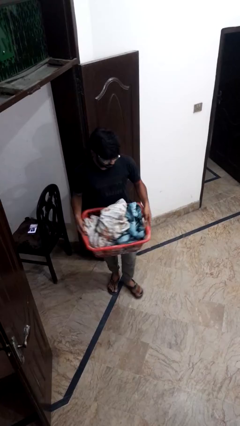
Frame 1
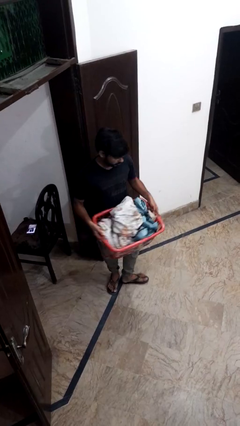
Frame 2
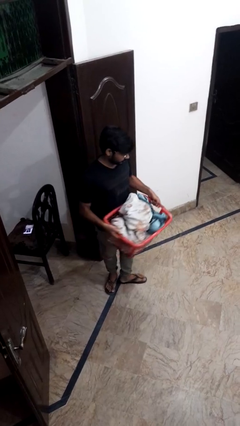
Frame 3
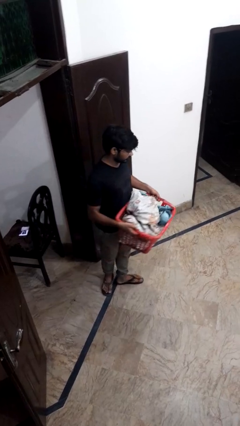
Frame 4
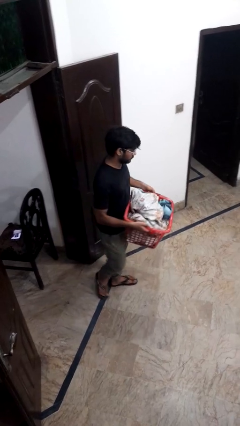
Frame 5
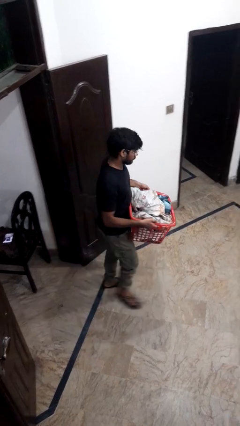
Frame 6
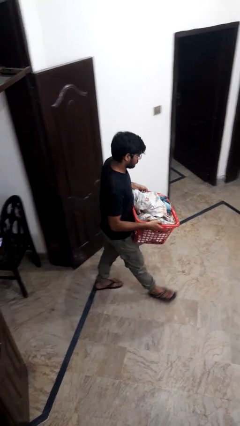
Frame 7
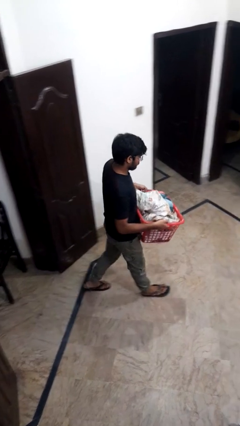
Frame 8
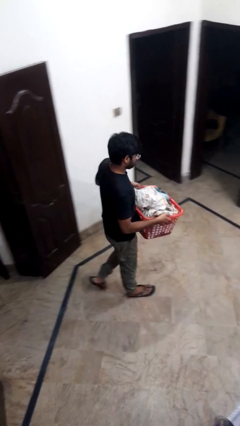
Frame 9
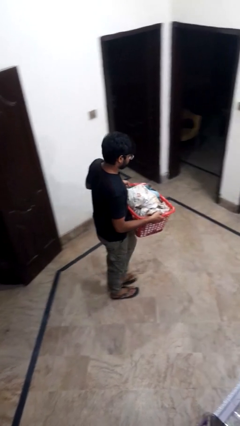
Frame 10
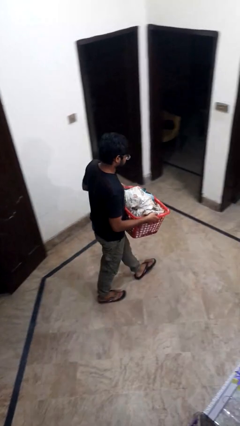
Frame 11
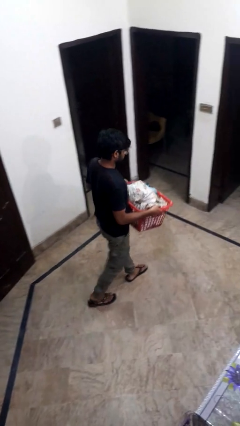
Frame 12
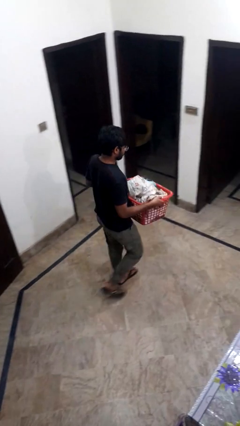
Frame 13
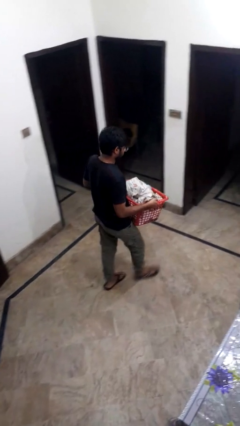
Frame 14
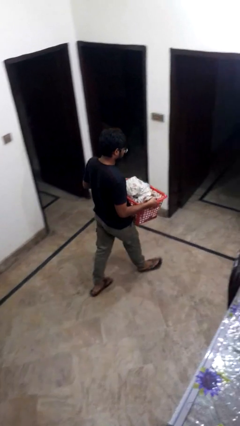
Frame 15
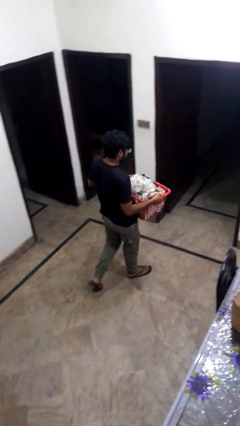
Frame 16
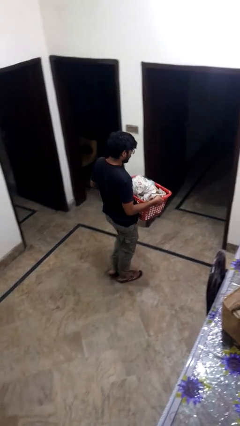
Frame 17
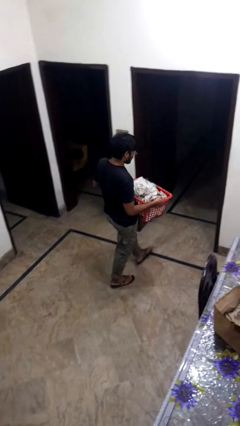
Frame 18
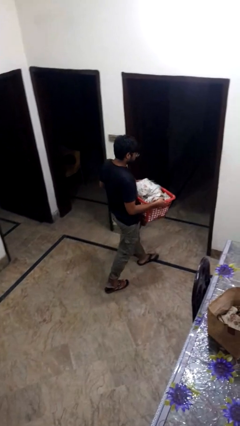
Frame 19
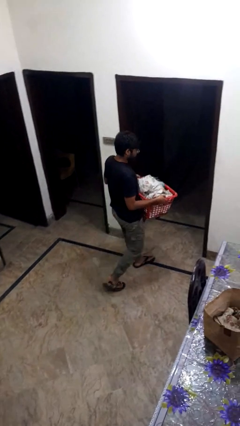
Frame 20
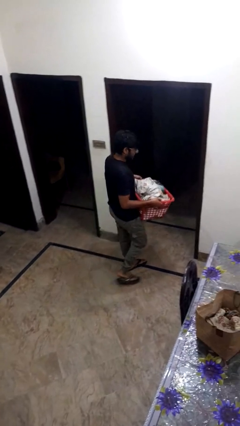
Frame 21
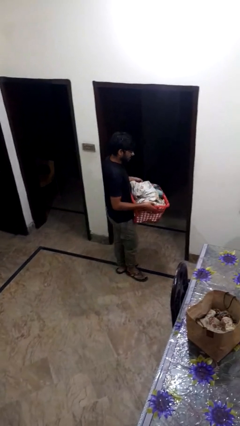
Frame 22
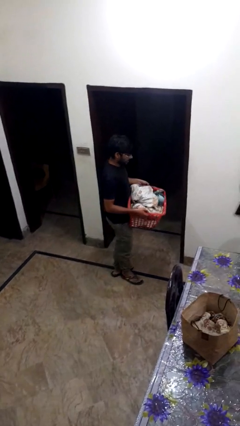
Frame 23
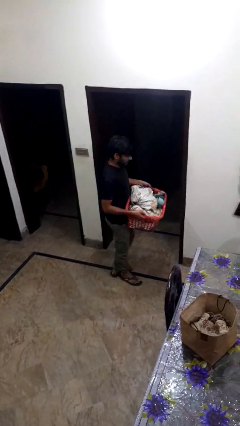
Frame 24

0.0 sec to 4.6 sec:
person carries laundry basket

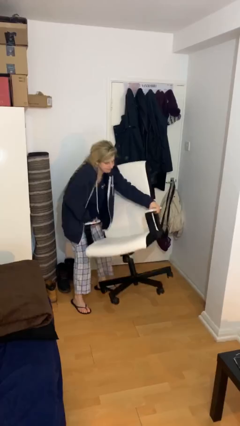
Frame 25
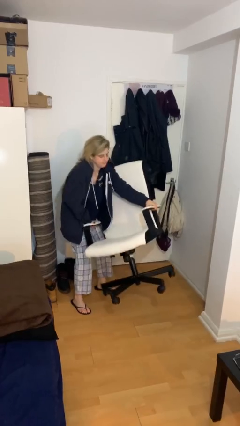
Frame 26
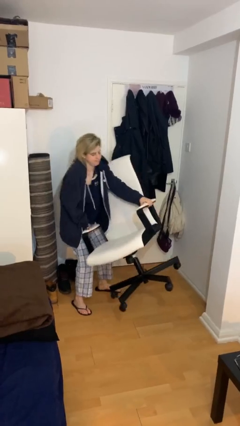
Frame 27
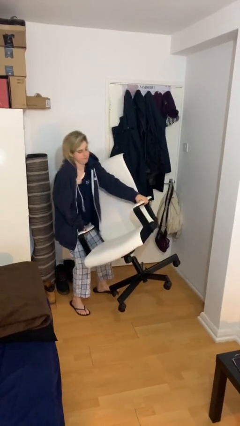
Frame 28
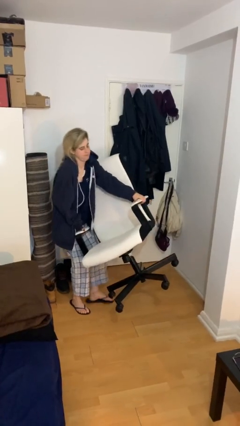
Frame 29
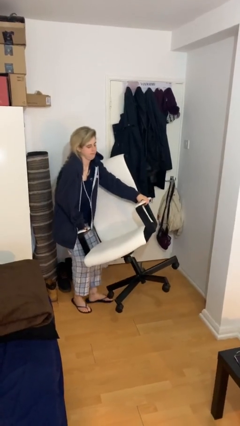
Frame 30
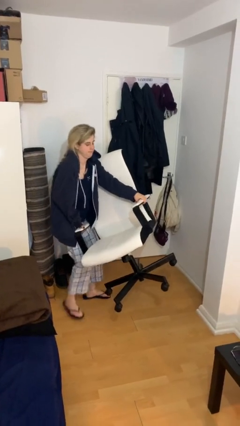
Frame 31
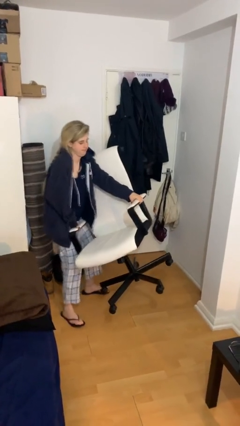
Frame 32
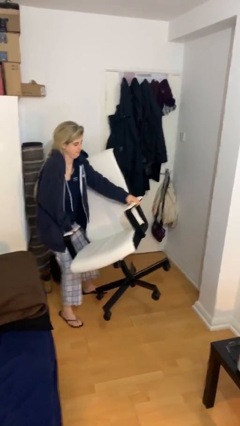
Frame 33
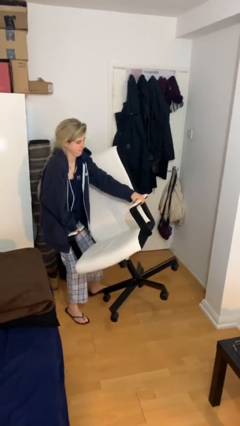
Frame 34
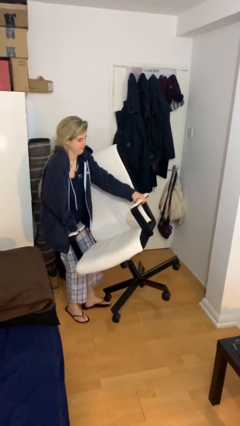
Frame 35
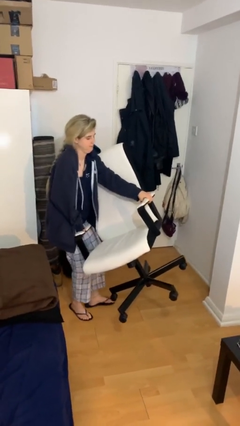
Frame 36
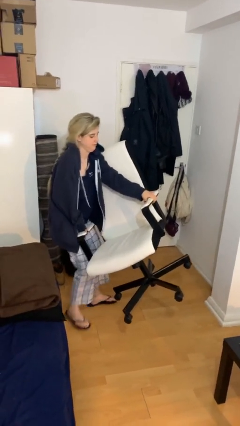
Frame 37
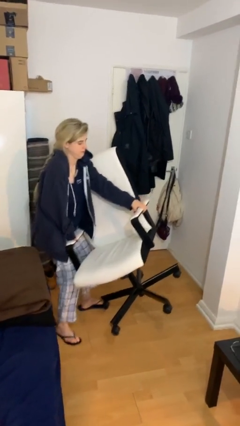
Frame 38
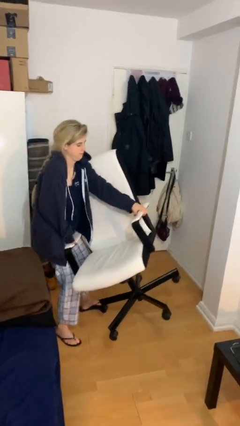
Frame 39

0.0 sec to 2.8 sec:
person carries heavy object

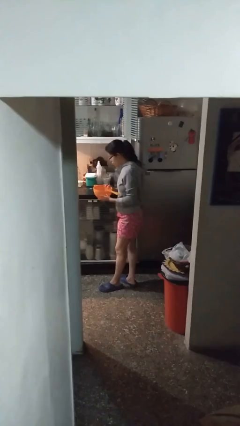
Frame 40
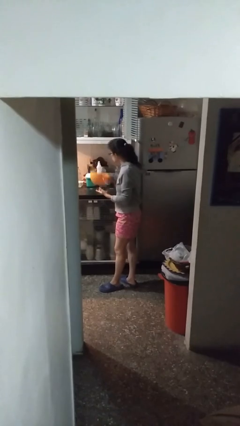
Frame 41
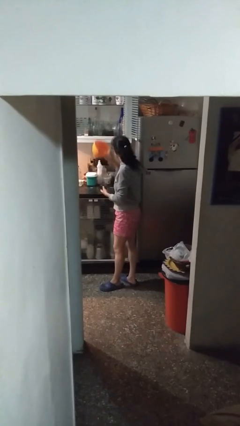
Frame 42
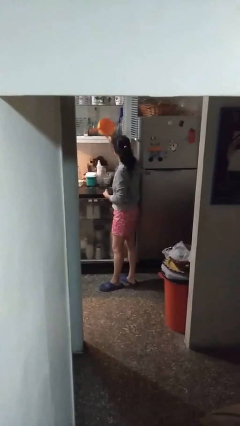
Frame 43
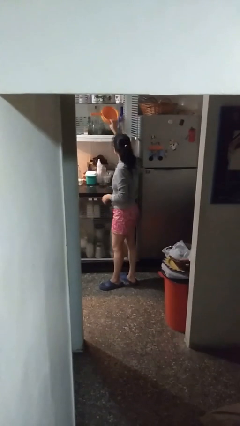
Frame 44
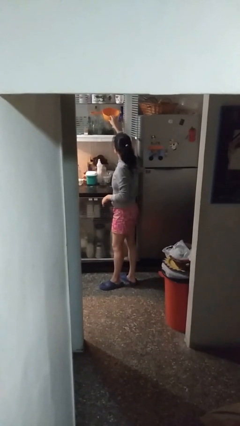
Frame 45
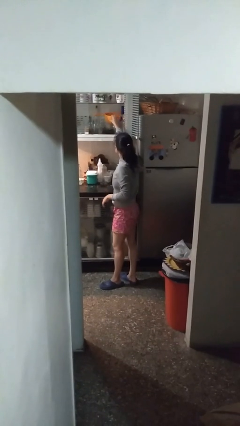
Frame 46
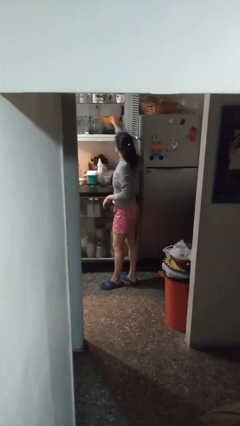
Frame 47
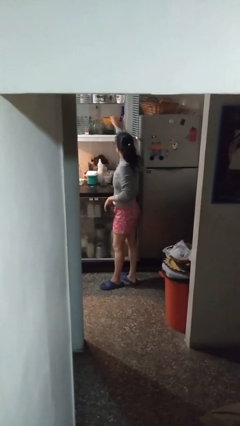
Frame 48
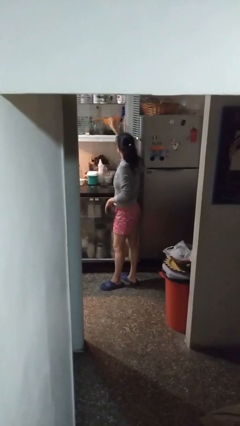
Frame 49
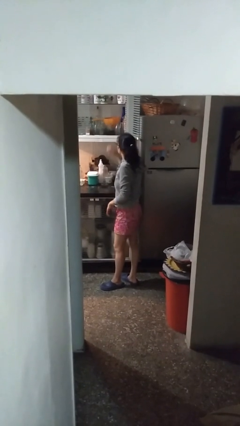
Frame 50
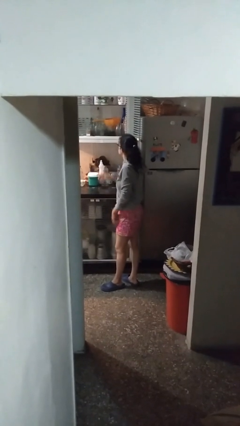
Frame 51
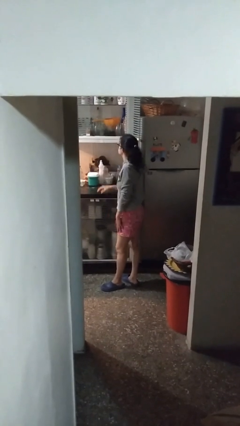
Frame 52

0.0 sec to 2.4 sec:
person puts down object into cabinet

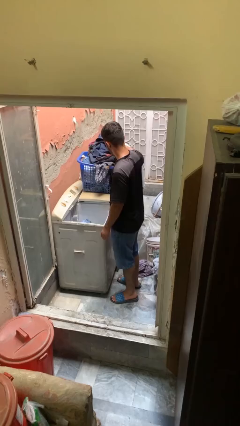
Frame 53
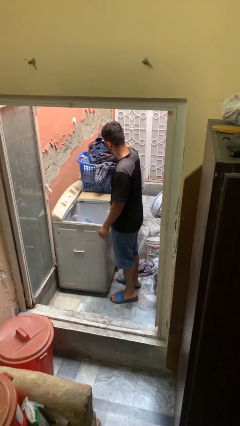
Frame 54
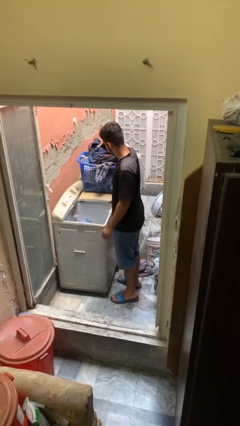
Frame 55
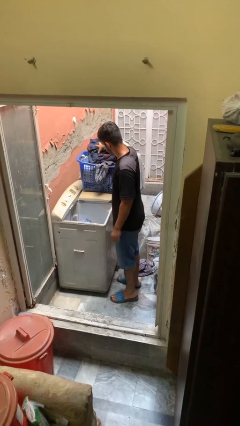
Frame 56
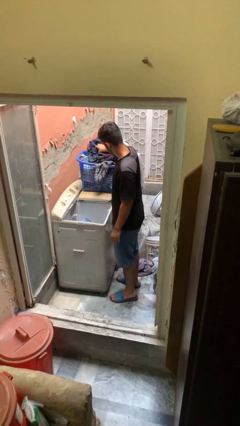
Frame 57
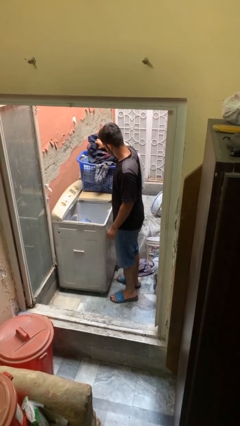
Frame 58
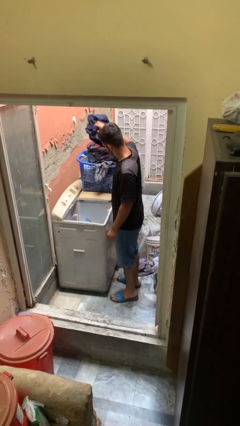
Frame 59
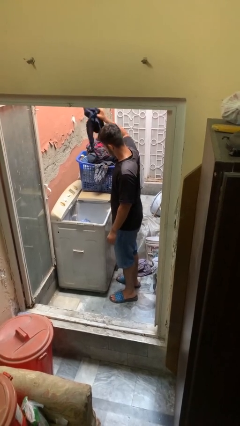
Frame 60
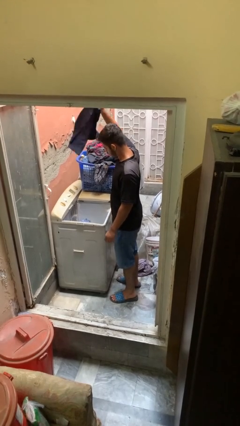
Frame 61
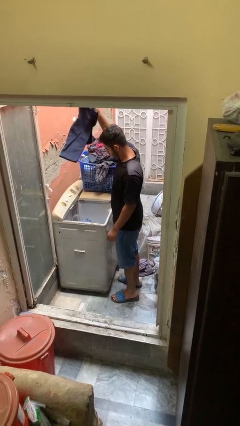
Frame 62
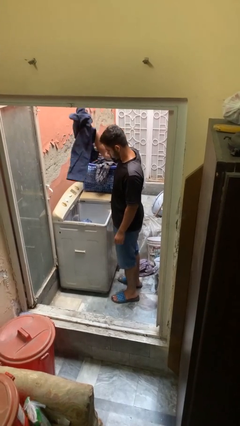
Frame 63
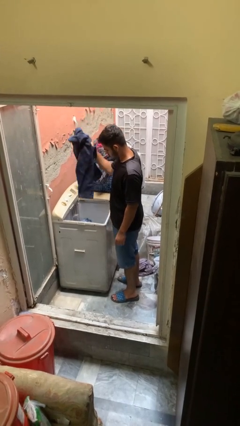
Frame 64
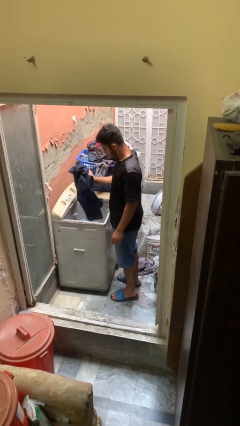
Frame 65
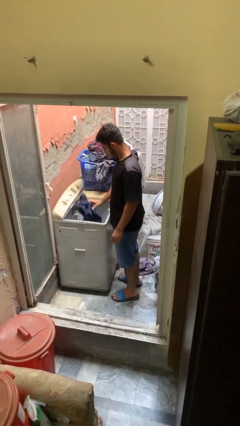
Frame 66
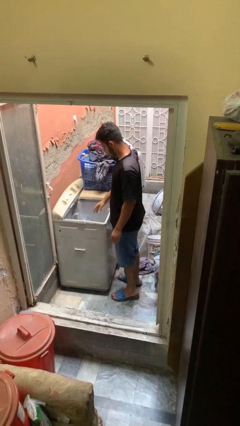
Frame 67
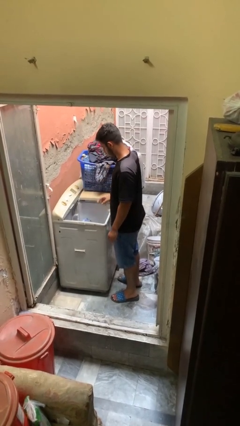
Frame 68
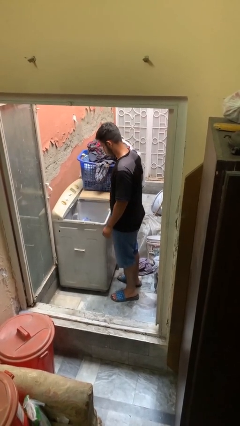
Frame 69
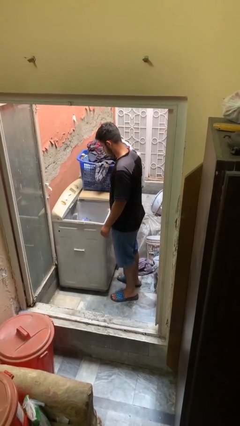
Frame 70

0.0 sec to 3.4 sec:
person loads clotheswasher

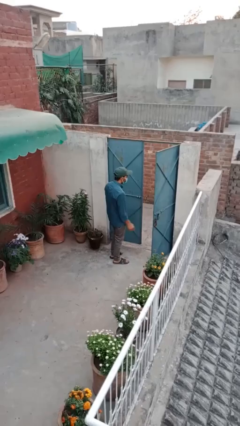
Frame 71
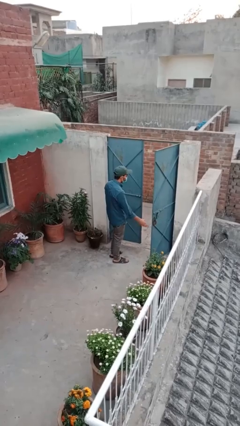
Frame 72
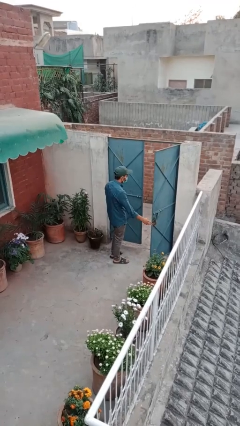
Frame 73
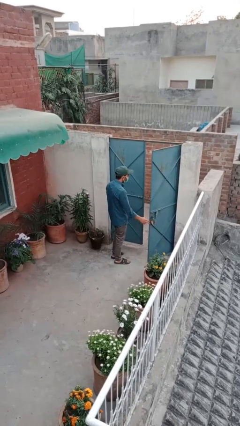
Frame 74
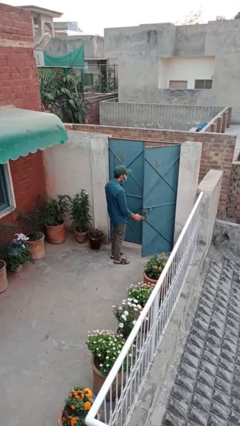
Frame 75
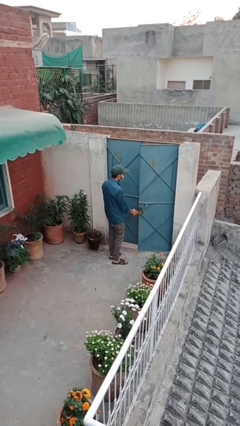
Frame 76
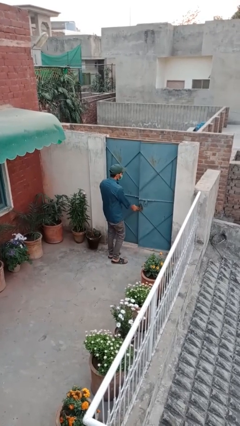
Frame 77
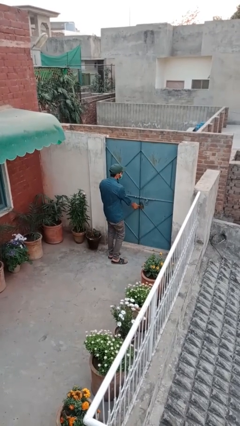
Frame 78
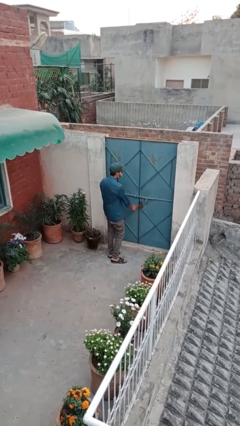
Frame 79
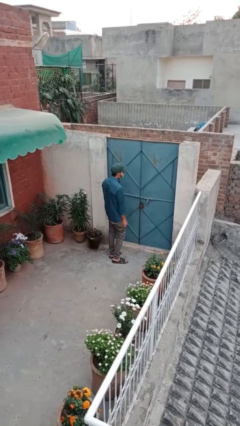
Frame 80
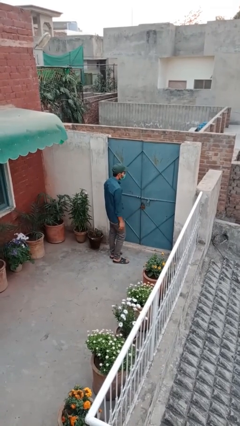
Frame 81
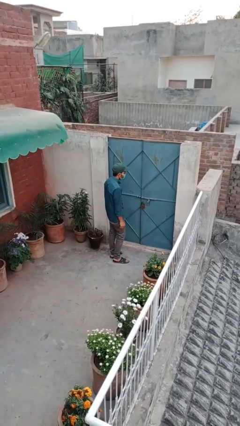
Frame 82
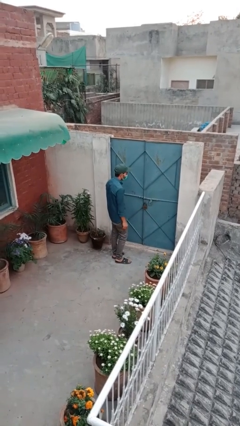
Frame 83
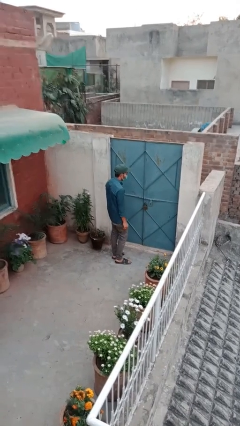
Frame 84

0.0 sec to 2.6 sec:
person closes facility door

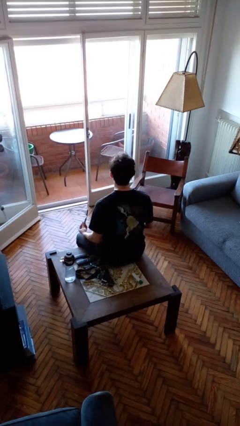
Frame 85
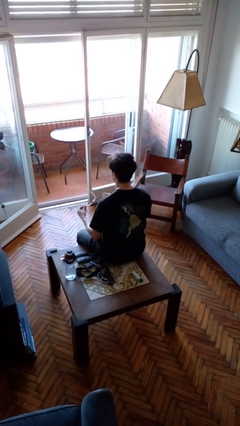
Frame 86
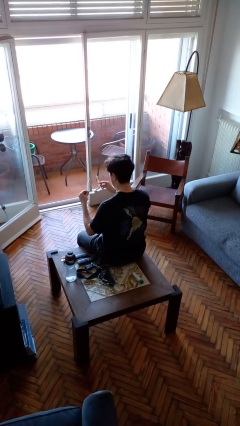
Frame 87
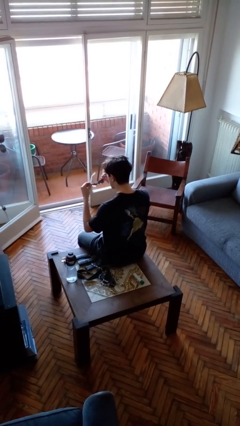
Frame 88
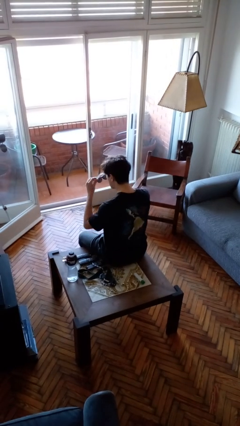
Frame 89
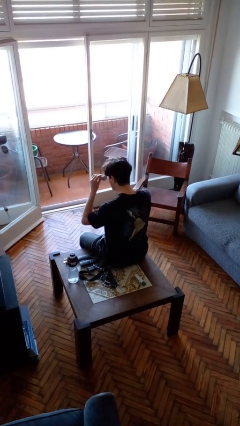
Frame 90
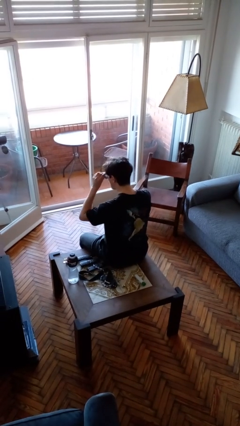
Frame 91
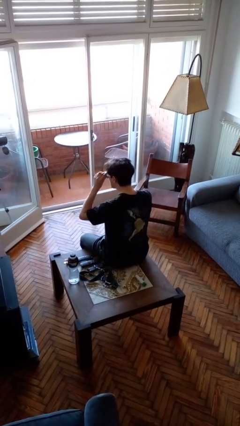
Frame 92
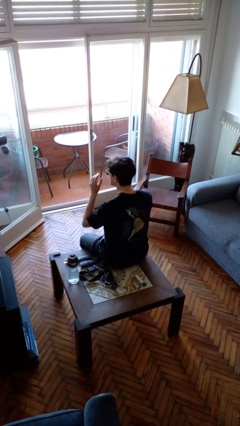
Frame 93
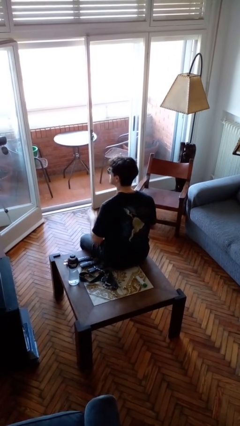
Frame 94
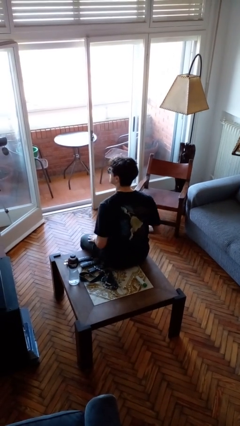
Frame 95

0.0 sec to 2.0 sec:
person puts on sunglasses
